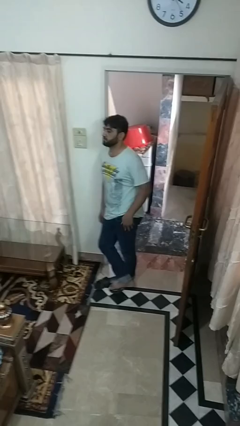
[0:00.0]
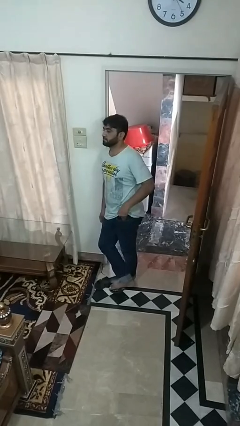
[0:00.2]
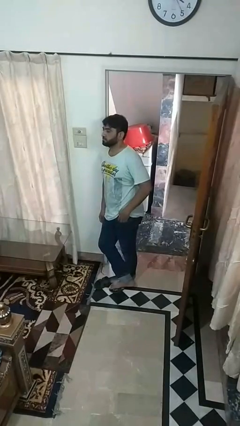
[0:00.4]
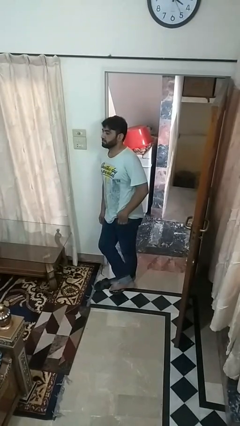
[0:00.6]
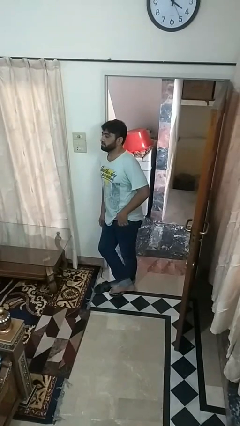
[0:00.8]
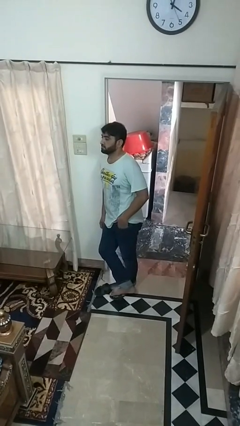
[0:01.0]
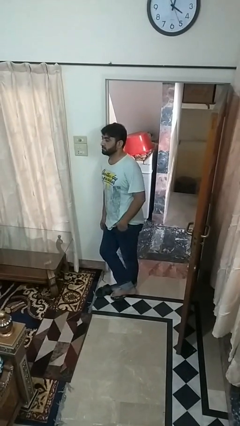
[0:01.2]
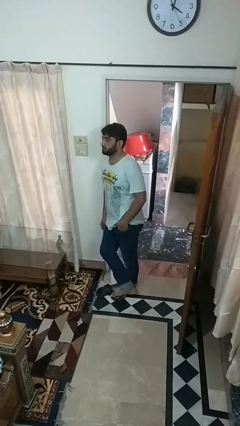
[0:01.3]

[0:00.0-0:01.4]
person puts hands in back pockets

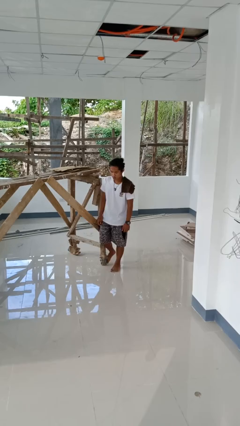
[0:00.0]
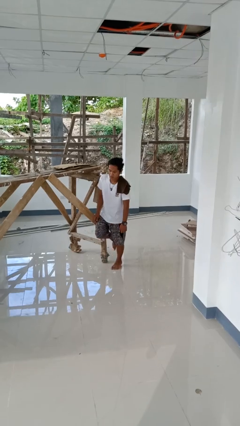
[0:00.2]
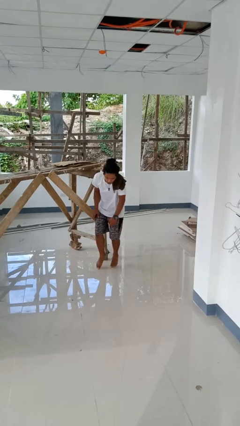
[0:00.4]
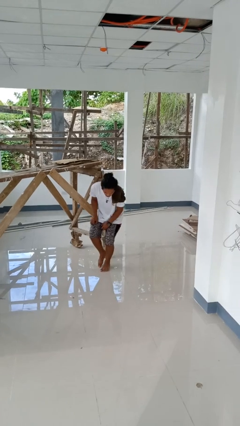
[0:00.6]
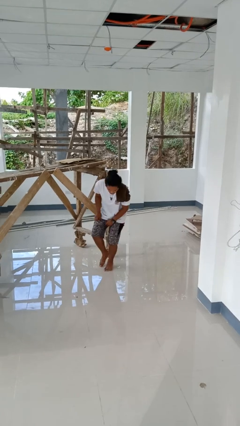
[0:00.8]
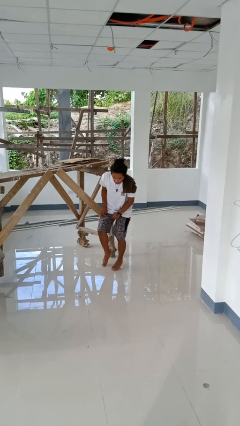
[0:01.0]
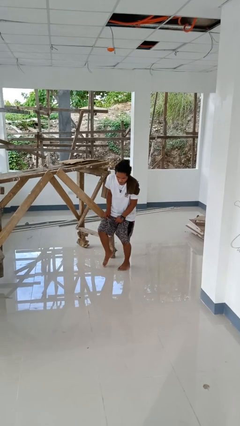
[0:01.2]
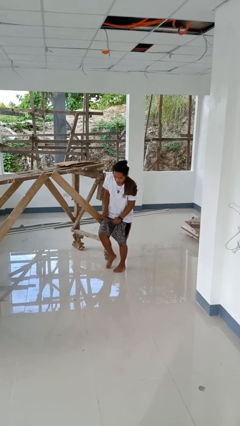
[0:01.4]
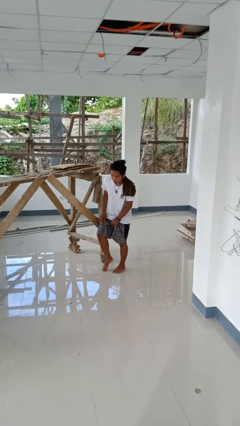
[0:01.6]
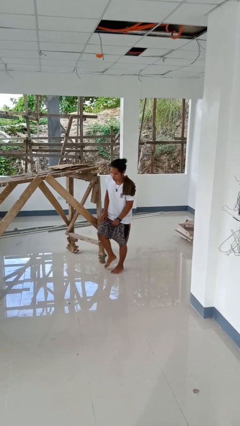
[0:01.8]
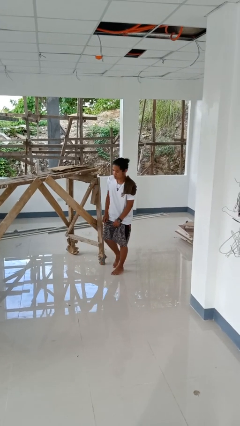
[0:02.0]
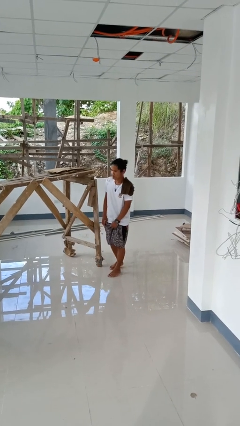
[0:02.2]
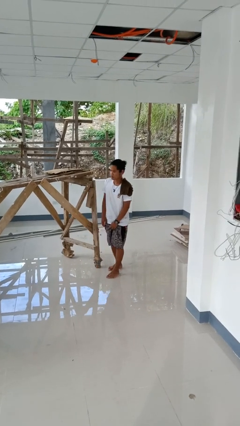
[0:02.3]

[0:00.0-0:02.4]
person stubs toe

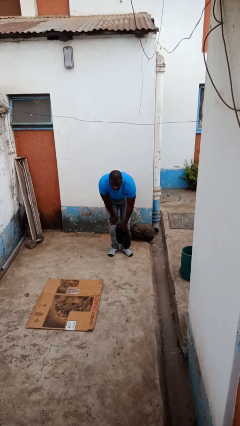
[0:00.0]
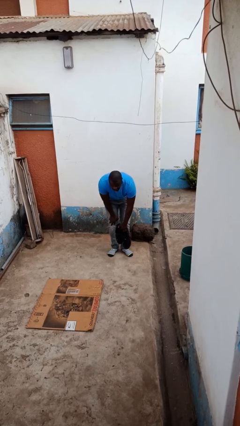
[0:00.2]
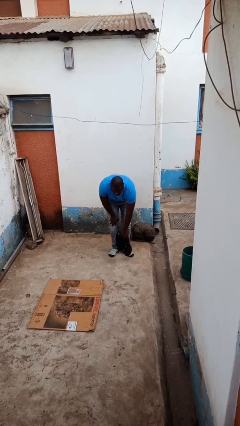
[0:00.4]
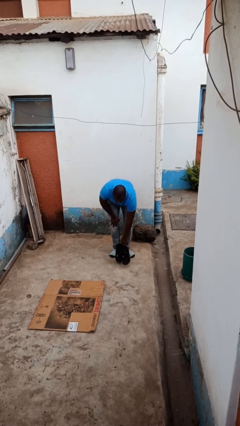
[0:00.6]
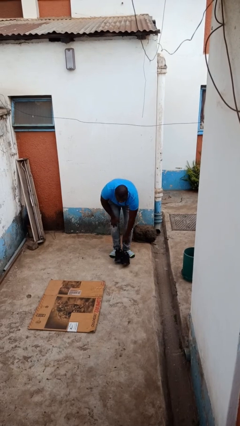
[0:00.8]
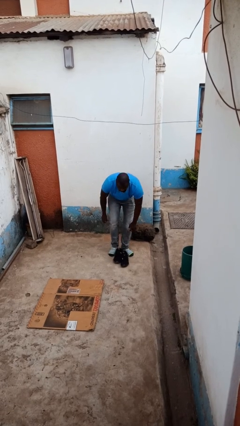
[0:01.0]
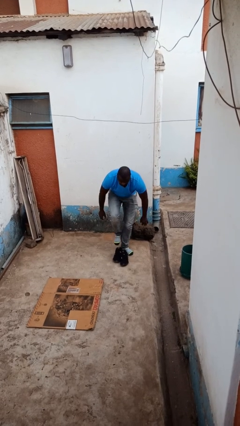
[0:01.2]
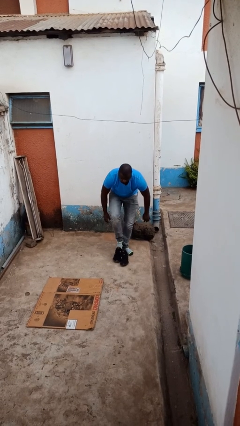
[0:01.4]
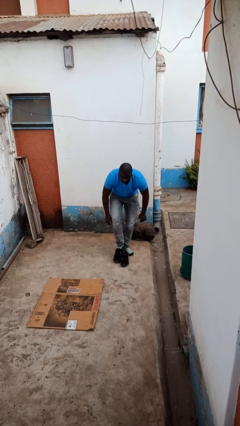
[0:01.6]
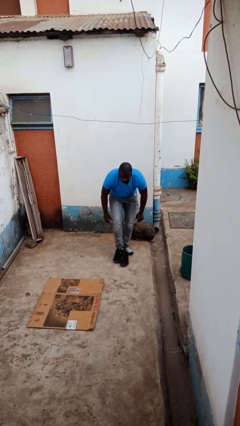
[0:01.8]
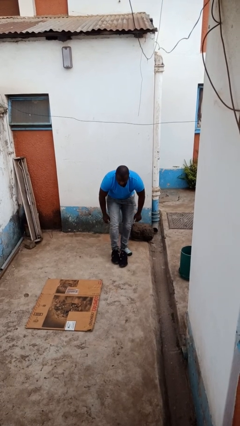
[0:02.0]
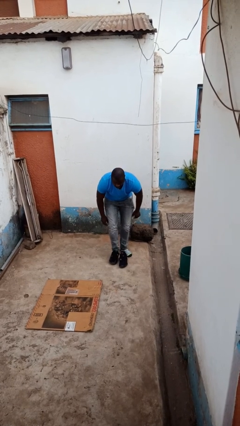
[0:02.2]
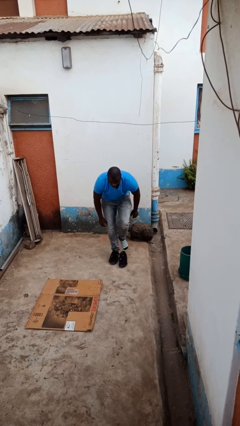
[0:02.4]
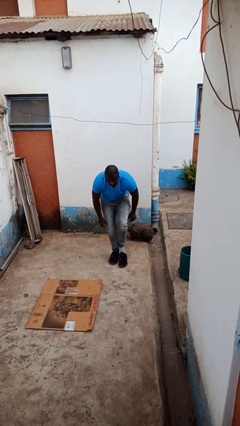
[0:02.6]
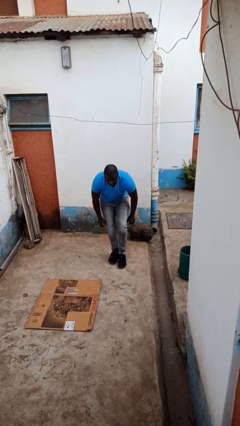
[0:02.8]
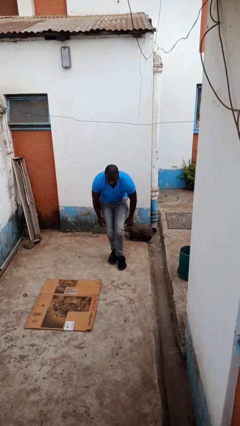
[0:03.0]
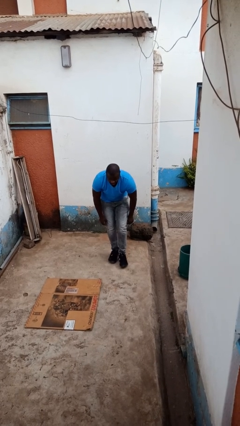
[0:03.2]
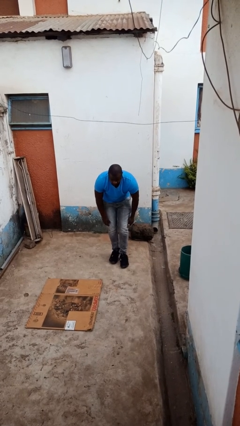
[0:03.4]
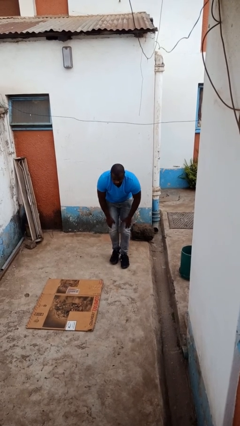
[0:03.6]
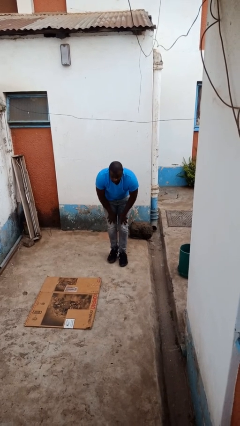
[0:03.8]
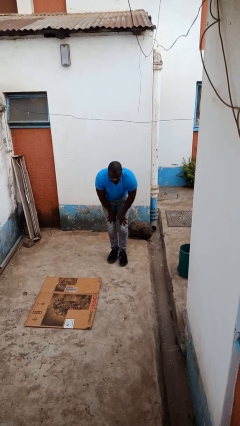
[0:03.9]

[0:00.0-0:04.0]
person puts on shoes

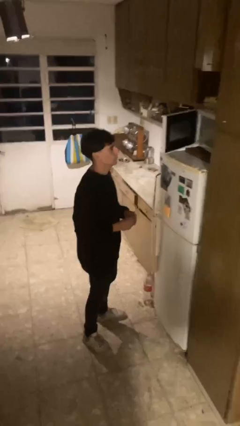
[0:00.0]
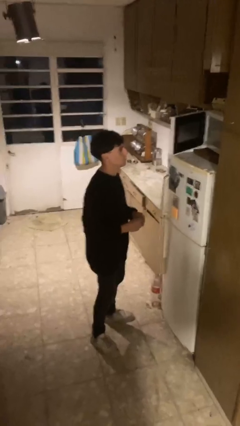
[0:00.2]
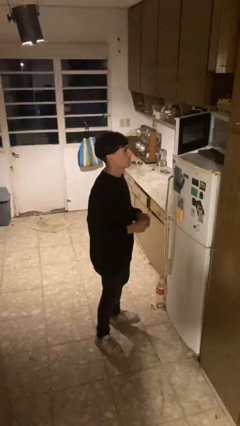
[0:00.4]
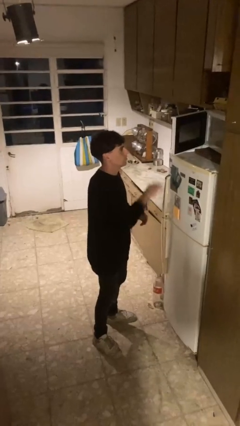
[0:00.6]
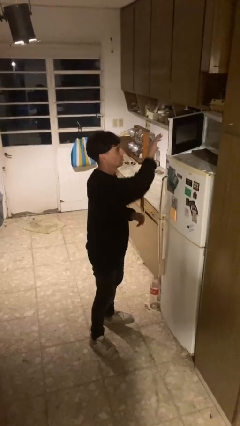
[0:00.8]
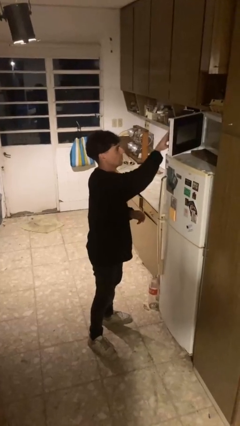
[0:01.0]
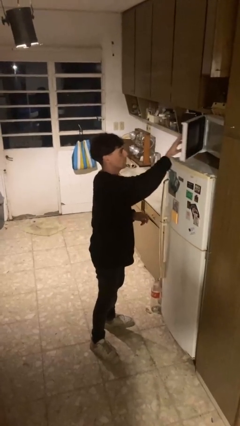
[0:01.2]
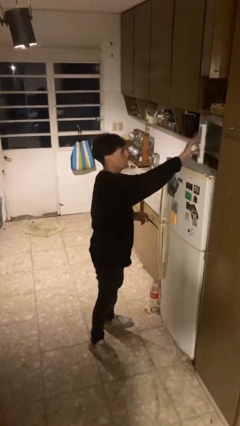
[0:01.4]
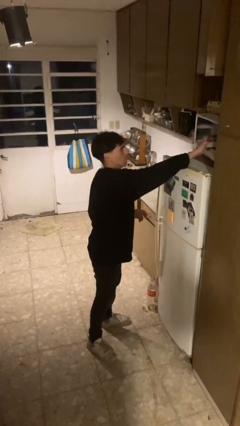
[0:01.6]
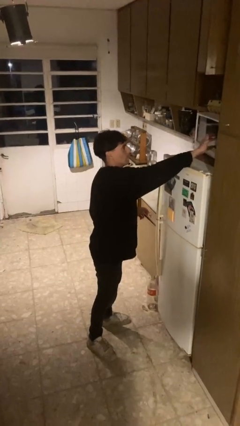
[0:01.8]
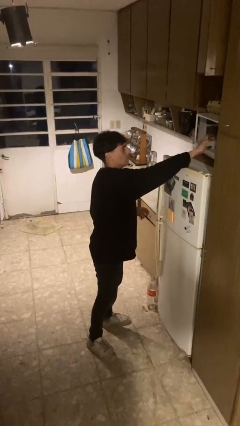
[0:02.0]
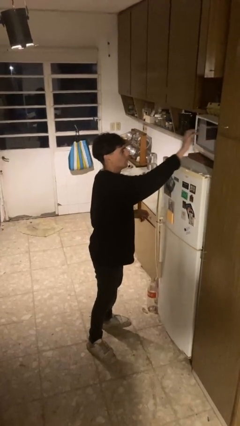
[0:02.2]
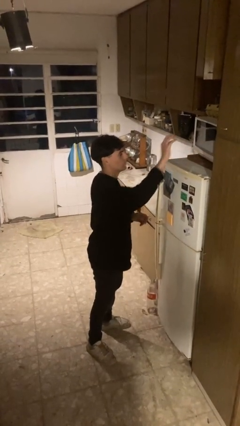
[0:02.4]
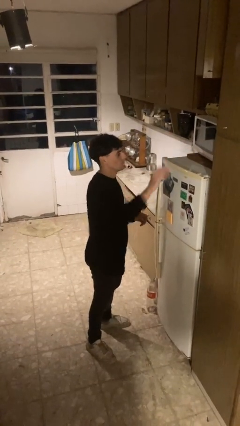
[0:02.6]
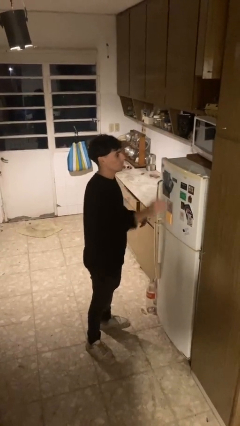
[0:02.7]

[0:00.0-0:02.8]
person closes microwave

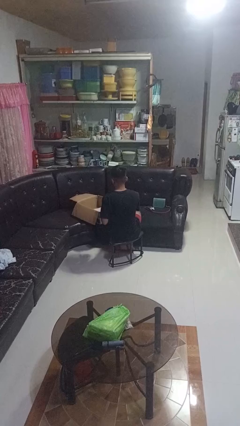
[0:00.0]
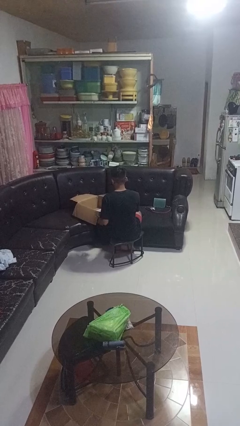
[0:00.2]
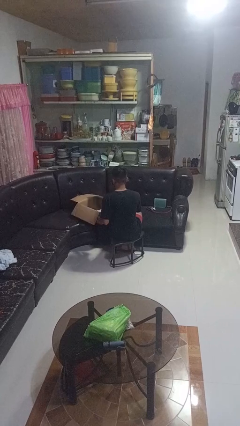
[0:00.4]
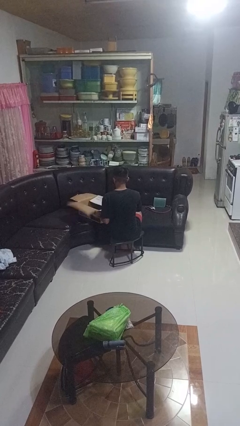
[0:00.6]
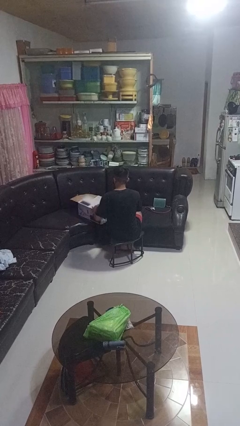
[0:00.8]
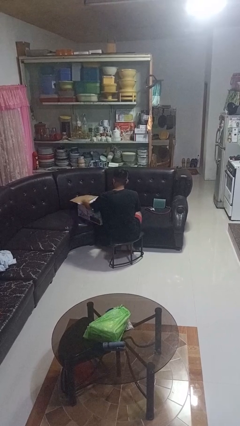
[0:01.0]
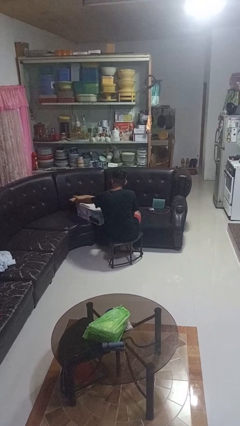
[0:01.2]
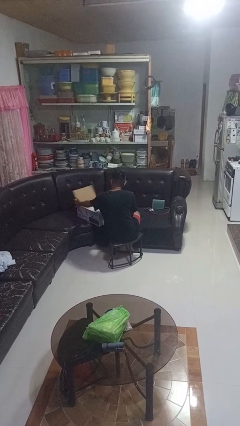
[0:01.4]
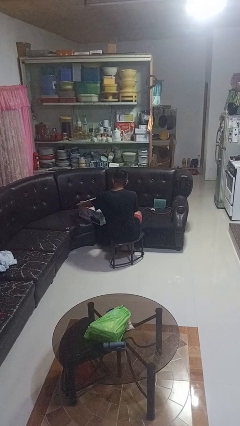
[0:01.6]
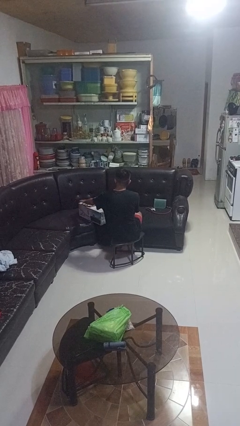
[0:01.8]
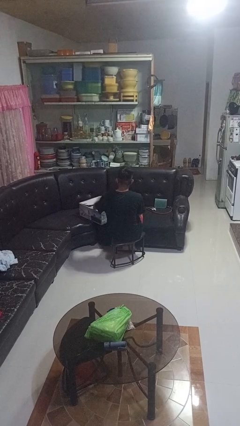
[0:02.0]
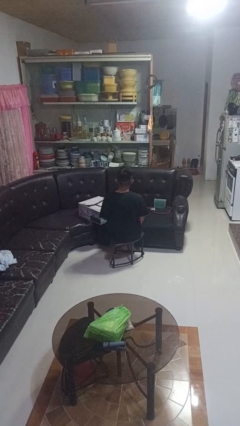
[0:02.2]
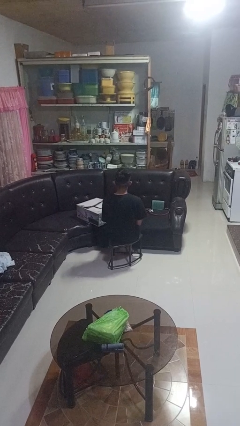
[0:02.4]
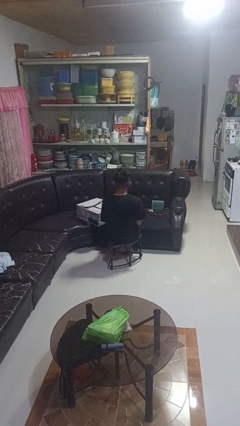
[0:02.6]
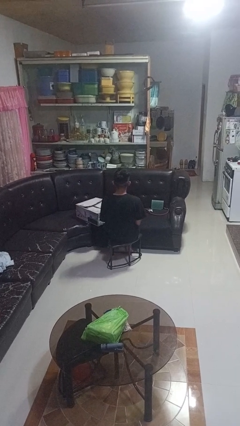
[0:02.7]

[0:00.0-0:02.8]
person closes box

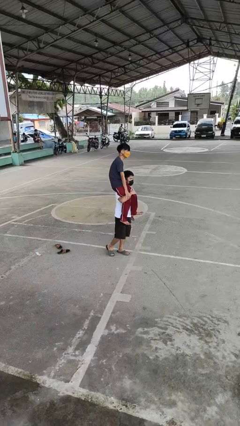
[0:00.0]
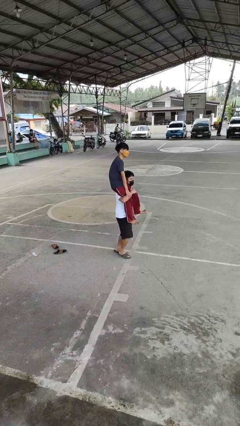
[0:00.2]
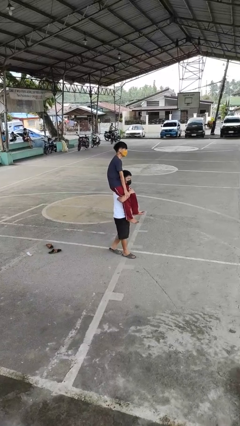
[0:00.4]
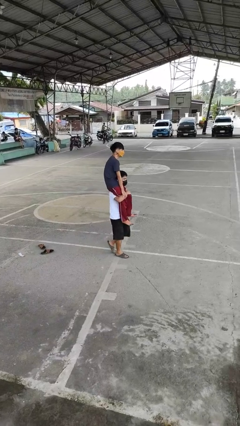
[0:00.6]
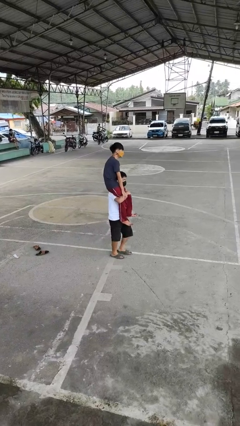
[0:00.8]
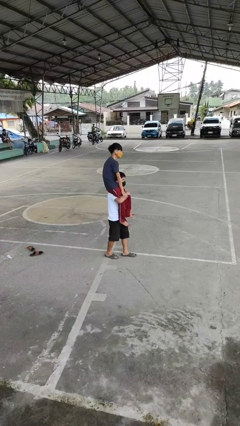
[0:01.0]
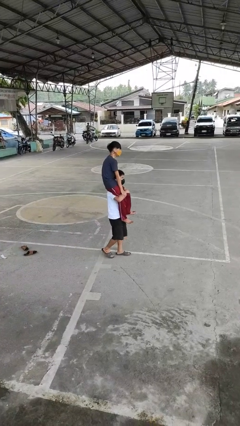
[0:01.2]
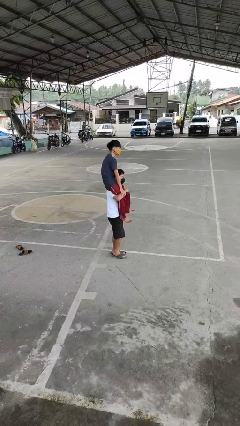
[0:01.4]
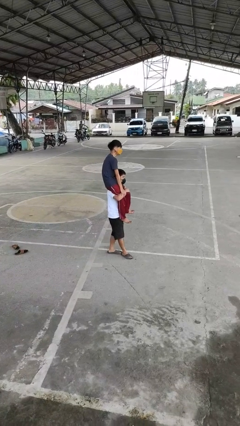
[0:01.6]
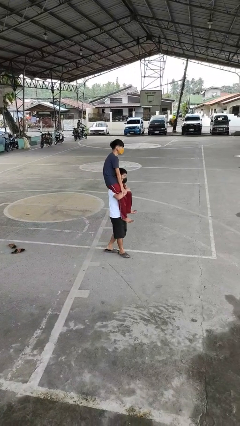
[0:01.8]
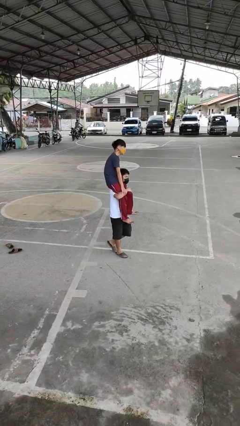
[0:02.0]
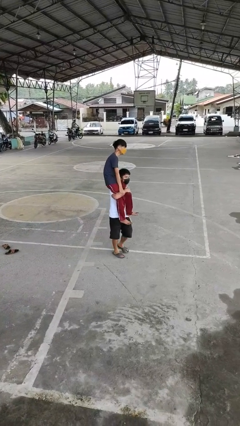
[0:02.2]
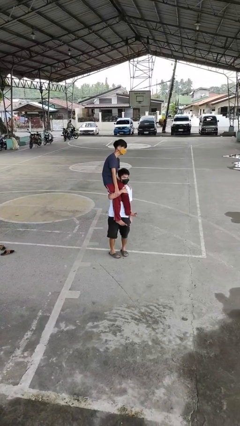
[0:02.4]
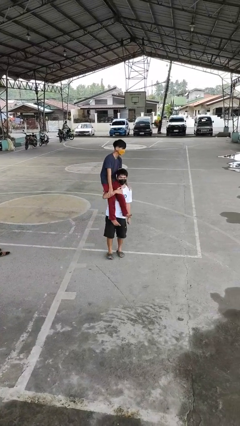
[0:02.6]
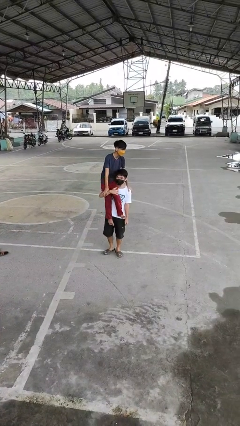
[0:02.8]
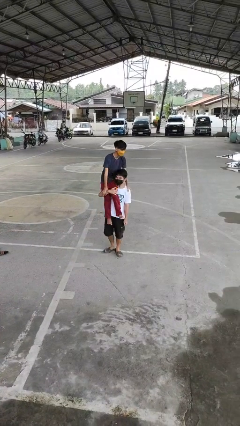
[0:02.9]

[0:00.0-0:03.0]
person carries person on shoulders

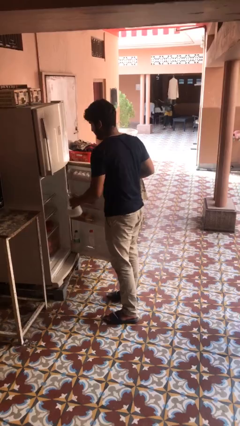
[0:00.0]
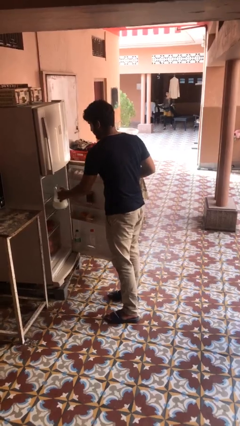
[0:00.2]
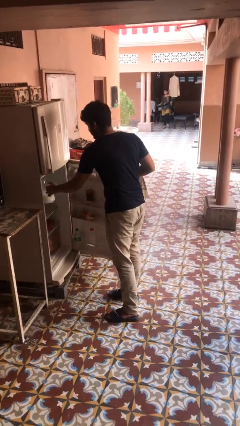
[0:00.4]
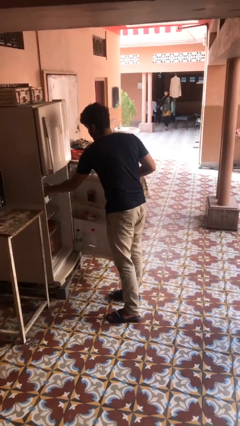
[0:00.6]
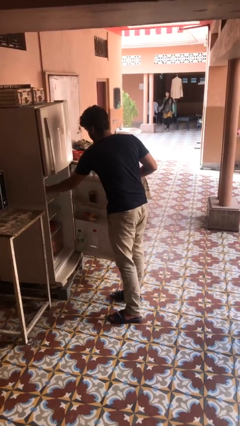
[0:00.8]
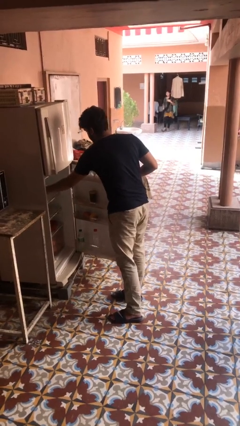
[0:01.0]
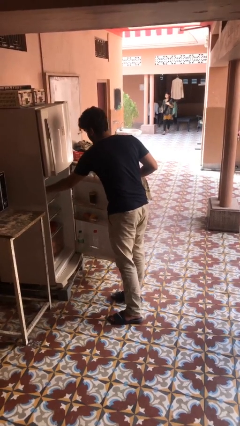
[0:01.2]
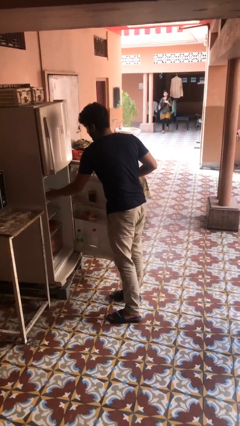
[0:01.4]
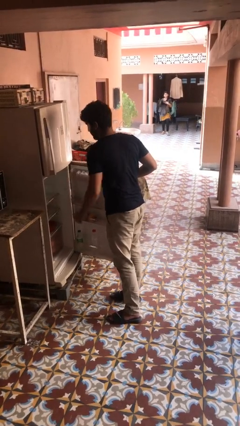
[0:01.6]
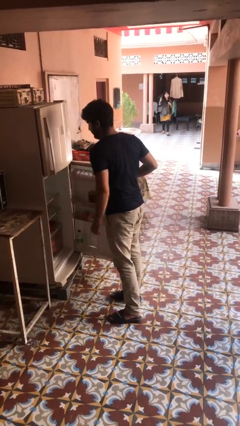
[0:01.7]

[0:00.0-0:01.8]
person puts object into refrigerator
